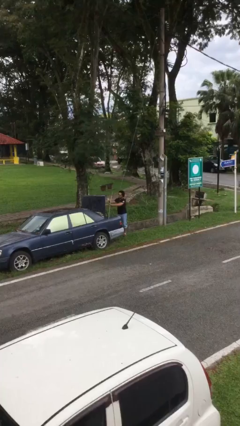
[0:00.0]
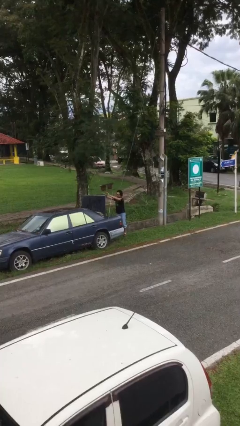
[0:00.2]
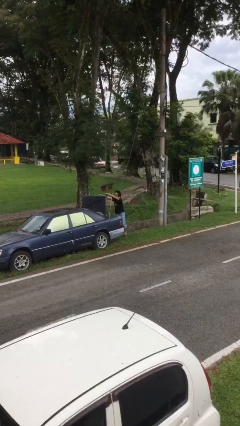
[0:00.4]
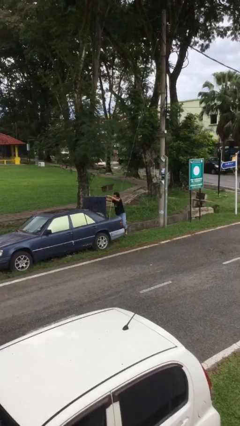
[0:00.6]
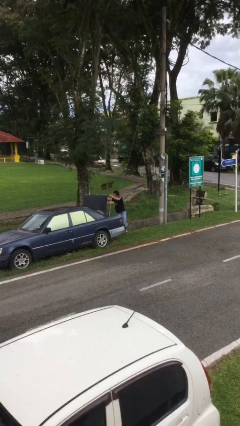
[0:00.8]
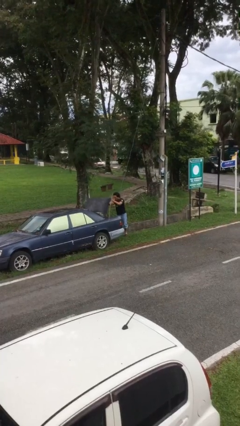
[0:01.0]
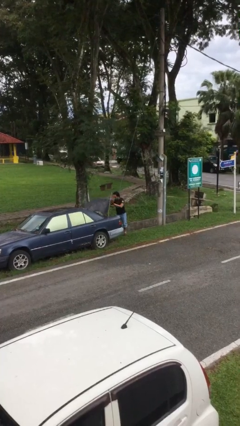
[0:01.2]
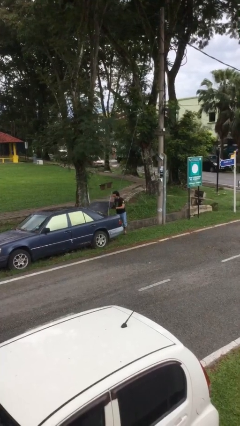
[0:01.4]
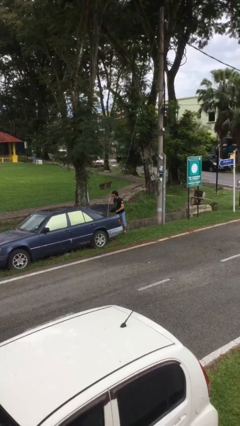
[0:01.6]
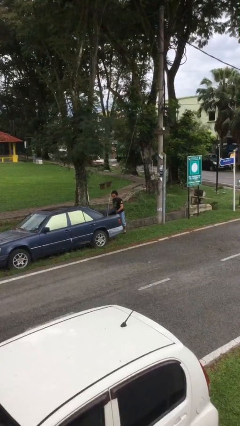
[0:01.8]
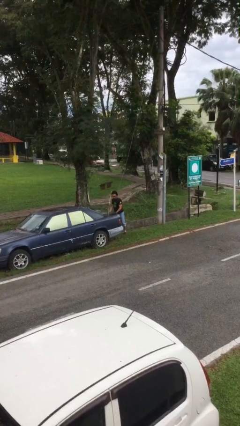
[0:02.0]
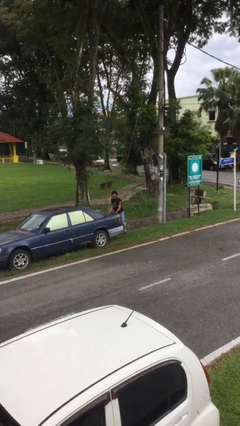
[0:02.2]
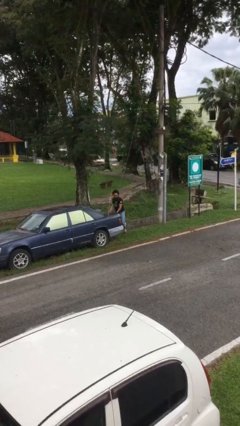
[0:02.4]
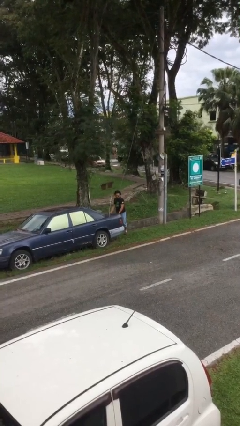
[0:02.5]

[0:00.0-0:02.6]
person closes car trunk

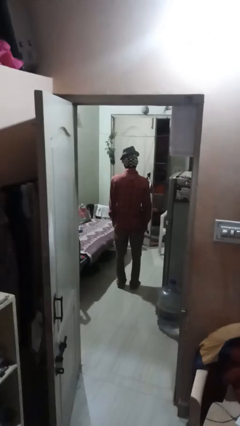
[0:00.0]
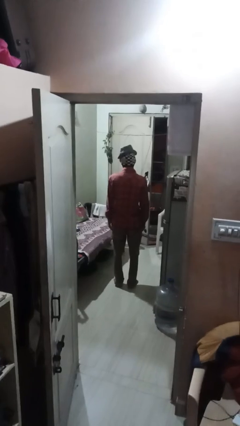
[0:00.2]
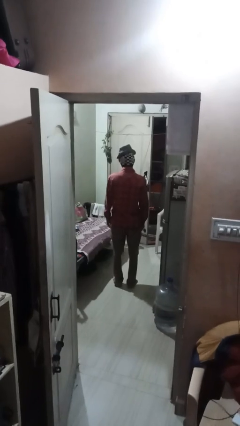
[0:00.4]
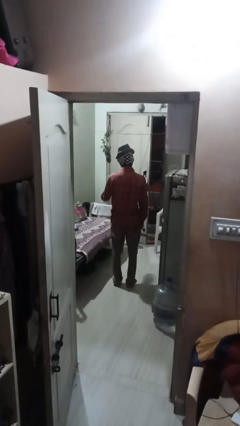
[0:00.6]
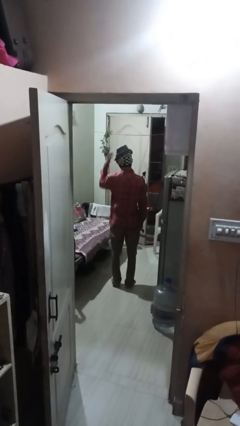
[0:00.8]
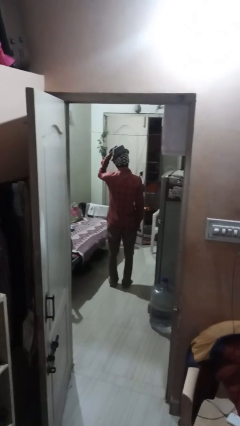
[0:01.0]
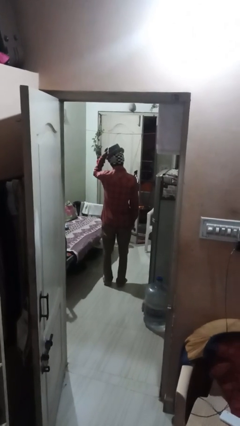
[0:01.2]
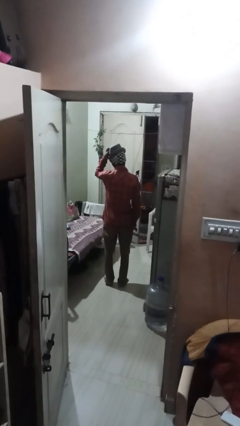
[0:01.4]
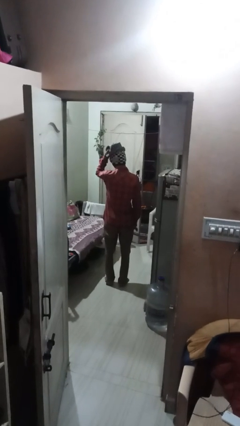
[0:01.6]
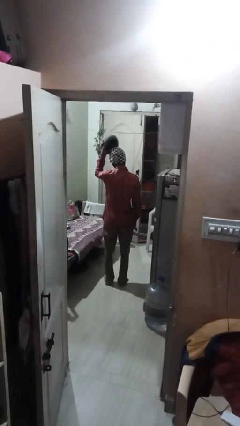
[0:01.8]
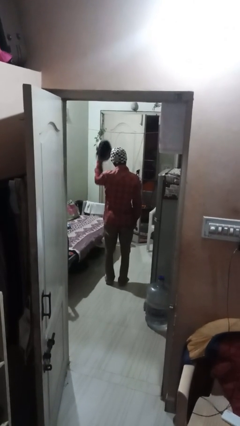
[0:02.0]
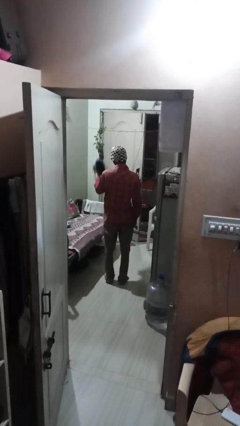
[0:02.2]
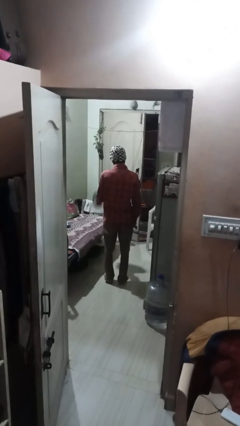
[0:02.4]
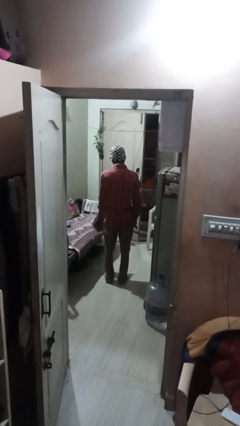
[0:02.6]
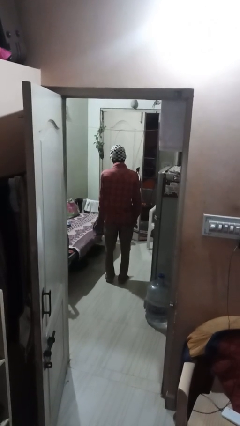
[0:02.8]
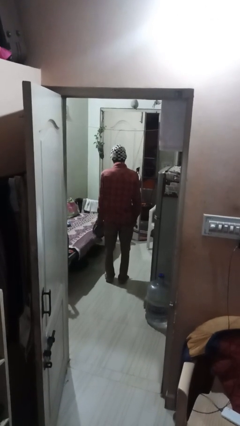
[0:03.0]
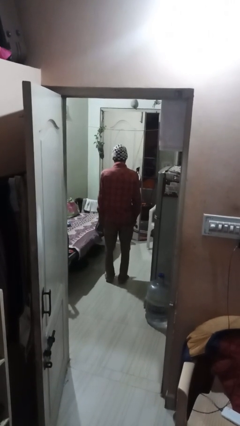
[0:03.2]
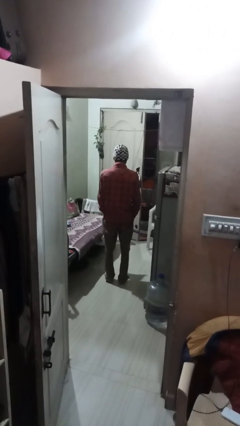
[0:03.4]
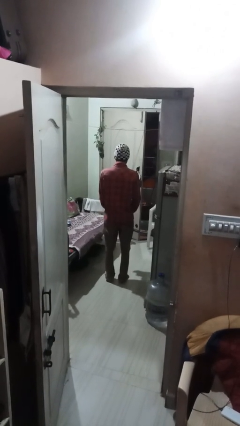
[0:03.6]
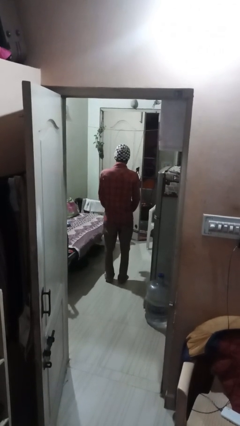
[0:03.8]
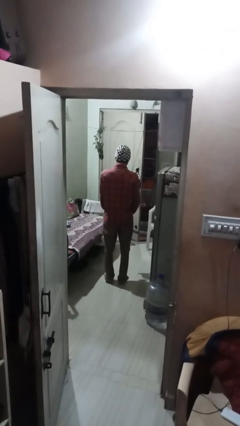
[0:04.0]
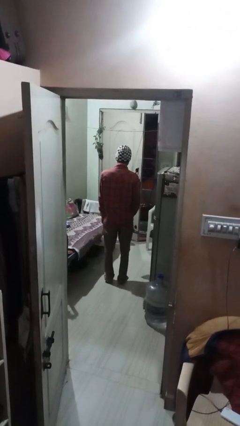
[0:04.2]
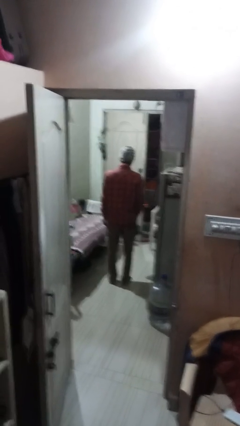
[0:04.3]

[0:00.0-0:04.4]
person takes off hat

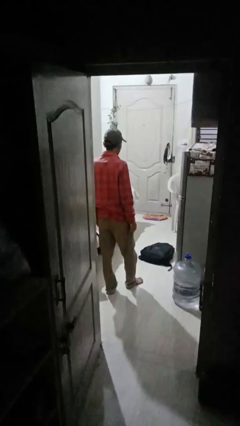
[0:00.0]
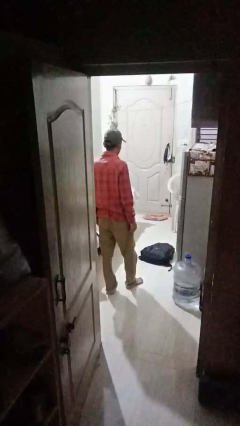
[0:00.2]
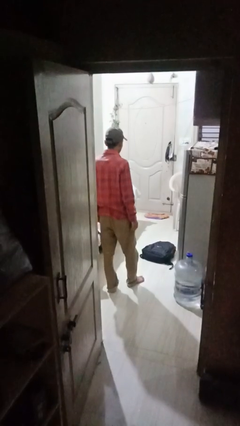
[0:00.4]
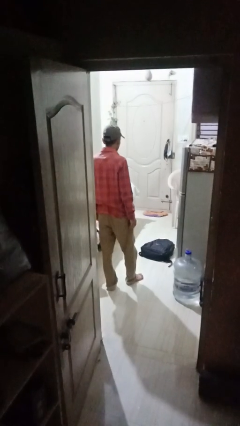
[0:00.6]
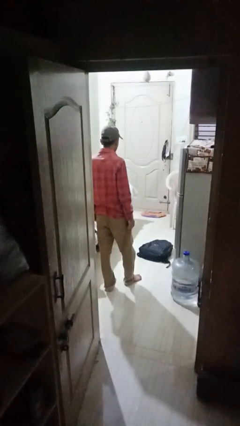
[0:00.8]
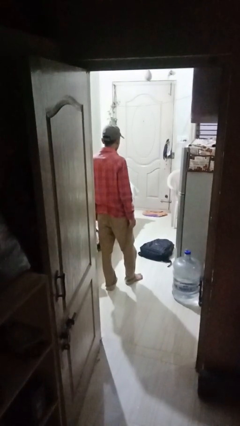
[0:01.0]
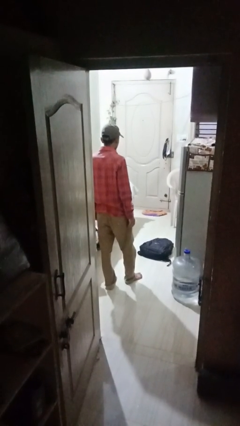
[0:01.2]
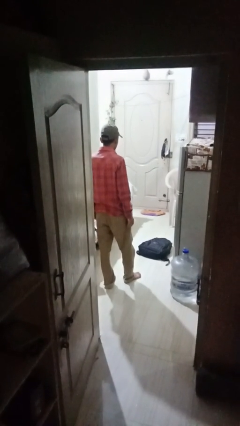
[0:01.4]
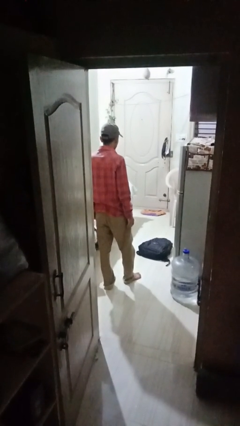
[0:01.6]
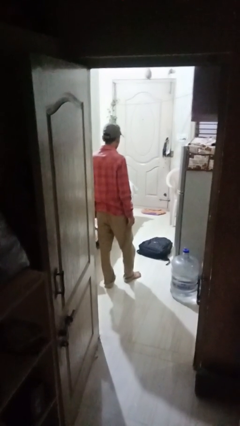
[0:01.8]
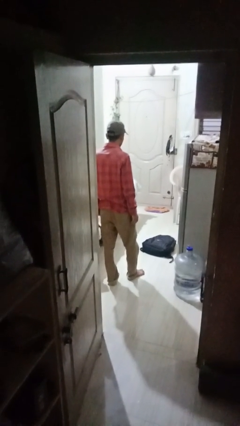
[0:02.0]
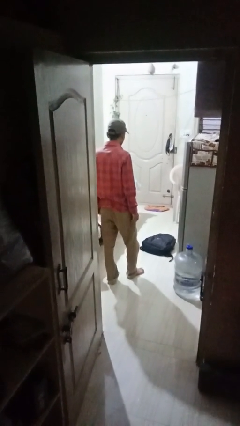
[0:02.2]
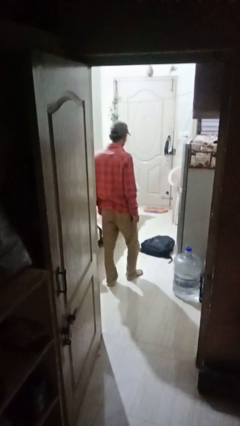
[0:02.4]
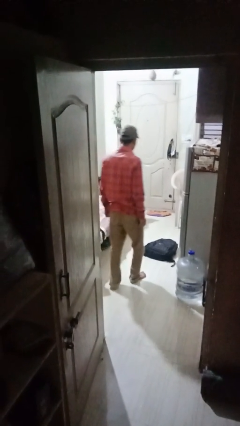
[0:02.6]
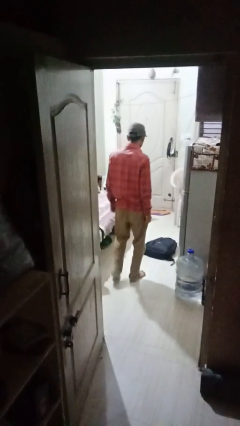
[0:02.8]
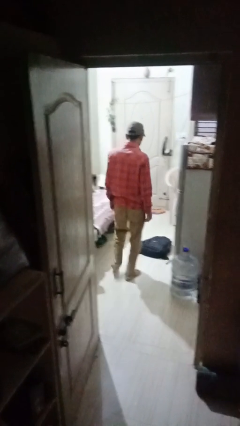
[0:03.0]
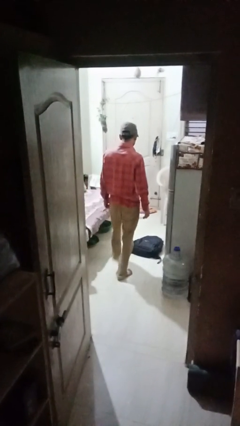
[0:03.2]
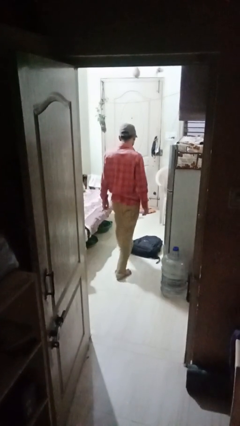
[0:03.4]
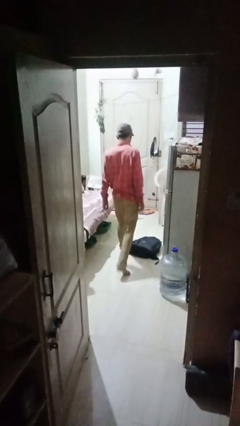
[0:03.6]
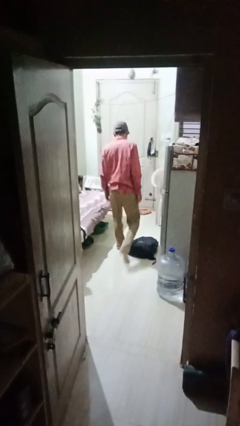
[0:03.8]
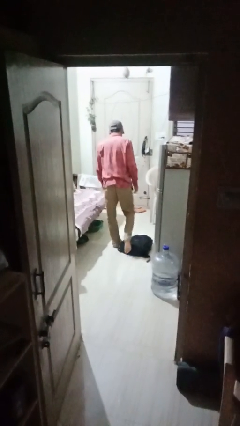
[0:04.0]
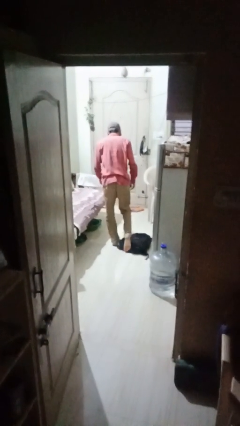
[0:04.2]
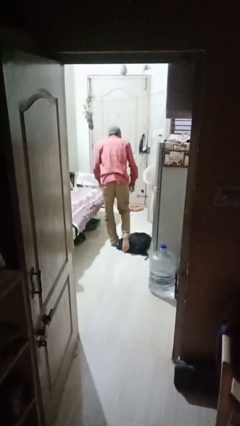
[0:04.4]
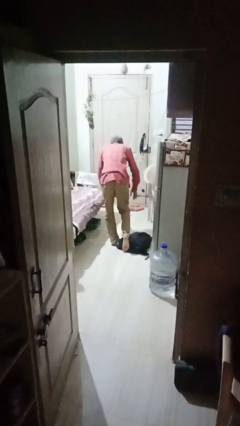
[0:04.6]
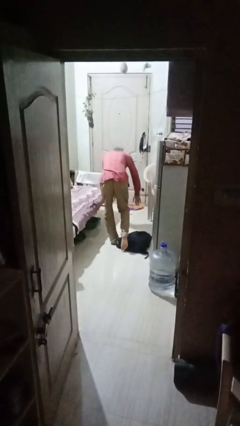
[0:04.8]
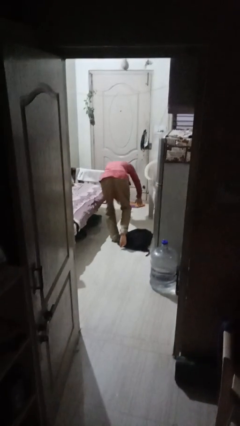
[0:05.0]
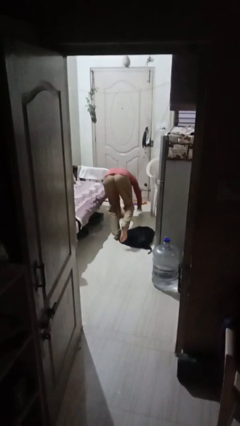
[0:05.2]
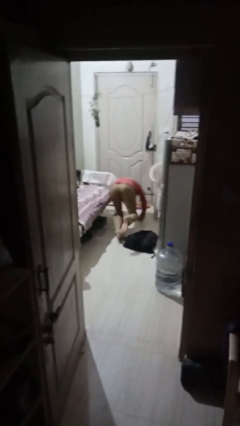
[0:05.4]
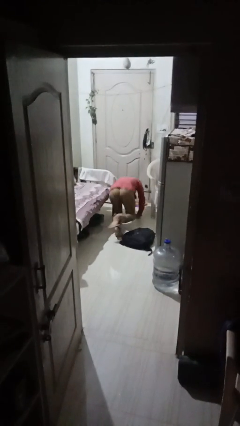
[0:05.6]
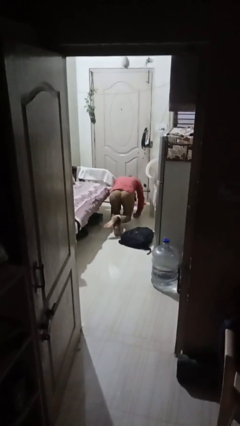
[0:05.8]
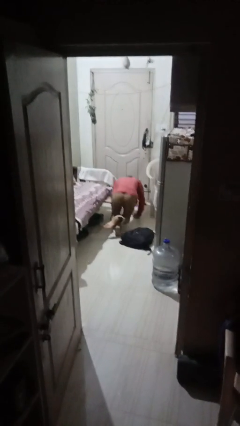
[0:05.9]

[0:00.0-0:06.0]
person trips on object on floor

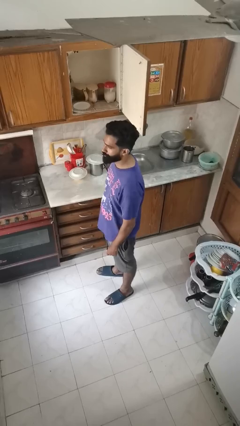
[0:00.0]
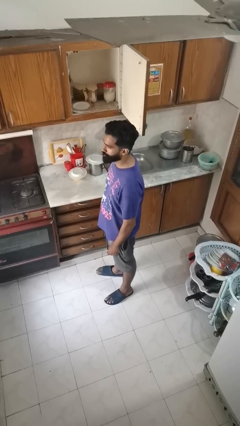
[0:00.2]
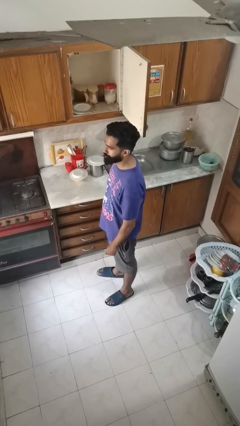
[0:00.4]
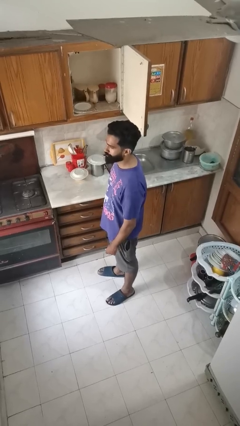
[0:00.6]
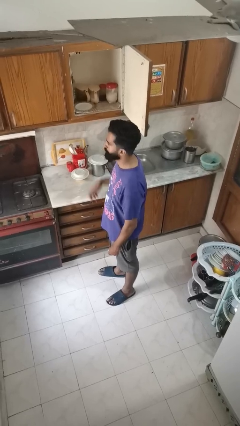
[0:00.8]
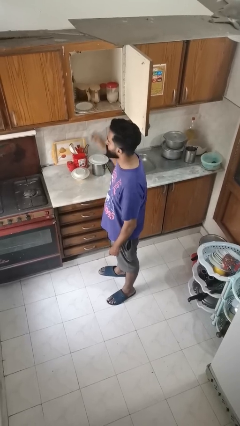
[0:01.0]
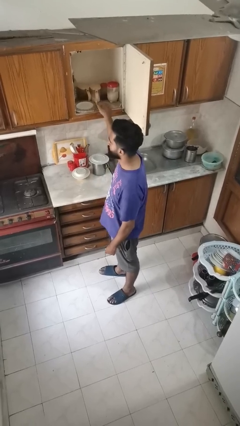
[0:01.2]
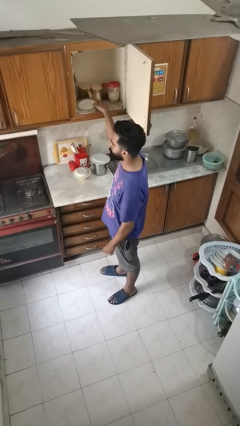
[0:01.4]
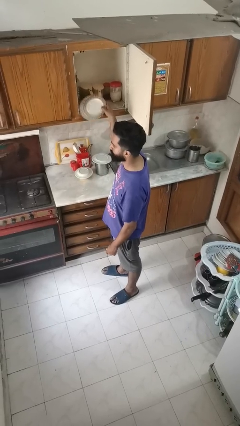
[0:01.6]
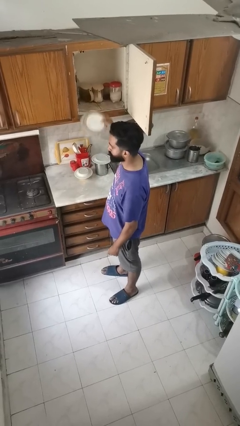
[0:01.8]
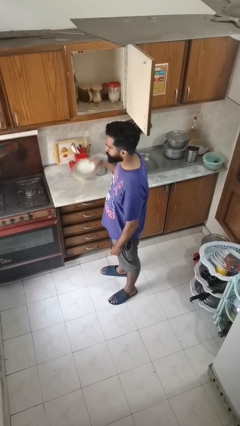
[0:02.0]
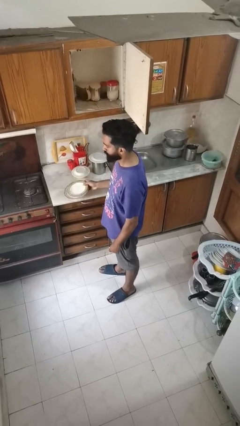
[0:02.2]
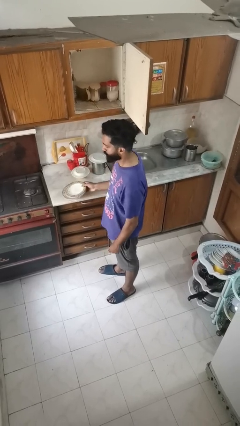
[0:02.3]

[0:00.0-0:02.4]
person takes object from cabinet

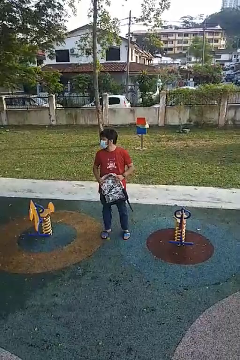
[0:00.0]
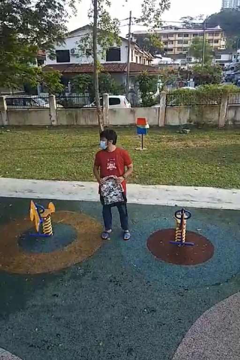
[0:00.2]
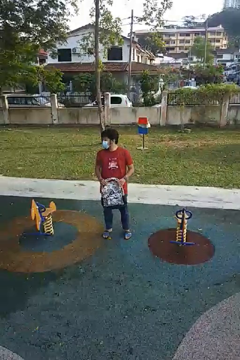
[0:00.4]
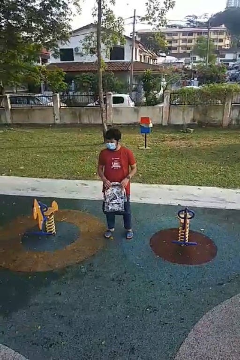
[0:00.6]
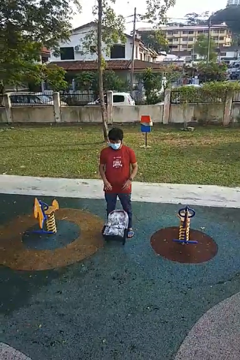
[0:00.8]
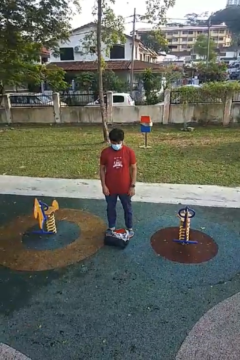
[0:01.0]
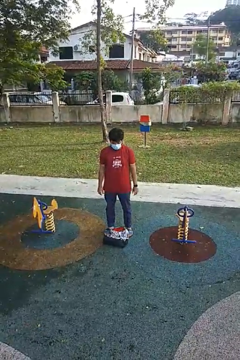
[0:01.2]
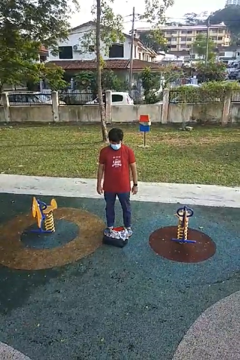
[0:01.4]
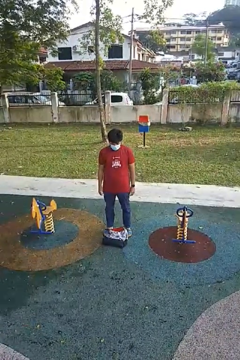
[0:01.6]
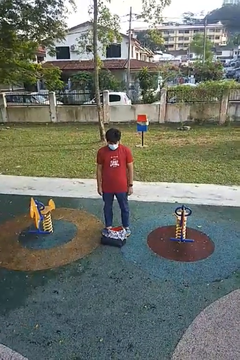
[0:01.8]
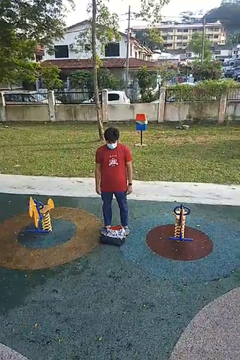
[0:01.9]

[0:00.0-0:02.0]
person drops object

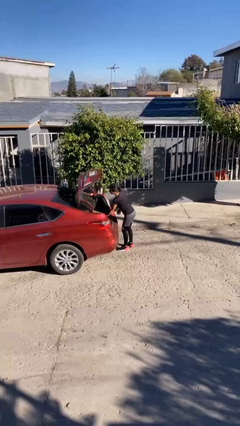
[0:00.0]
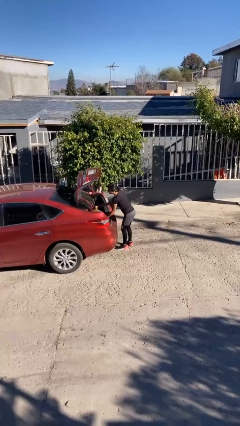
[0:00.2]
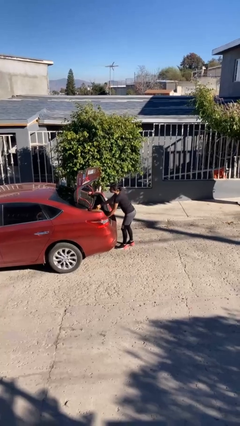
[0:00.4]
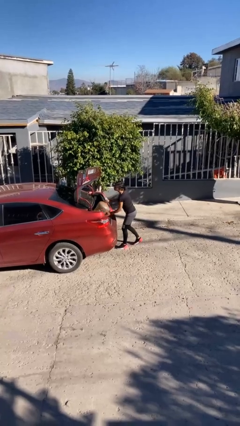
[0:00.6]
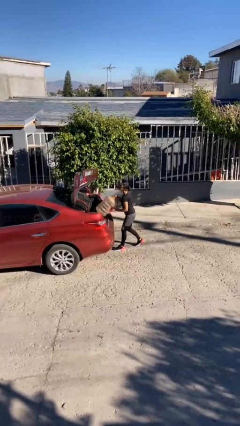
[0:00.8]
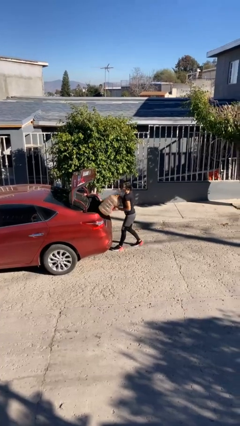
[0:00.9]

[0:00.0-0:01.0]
person unloads car
